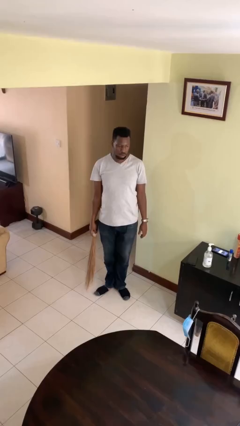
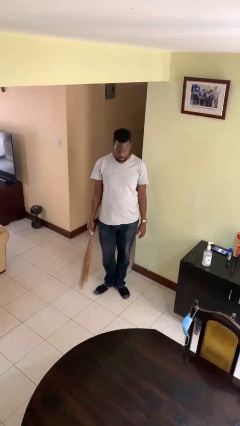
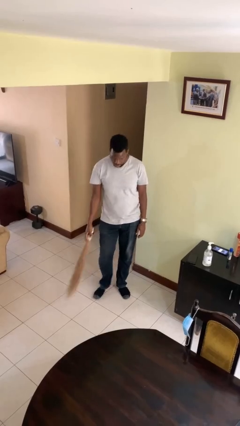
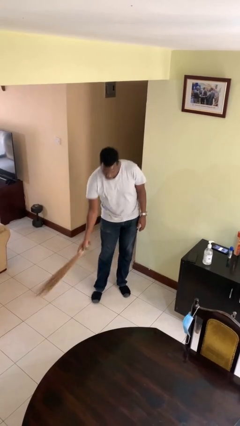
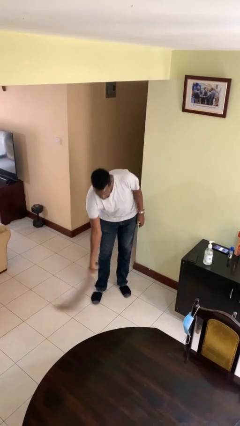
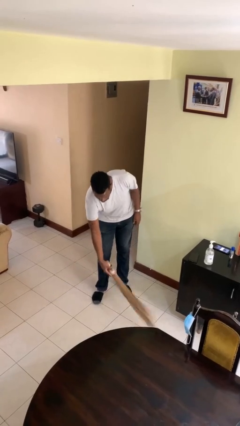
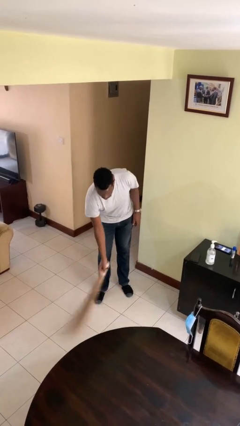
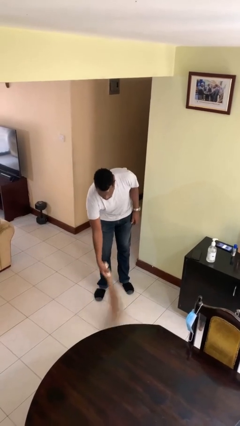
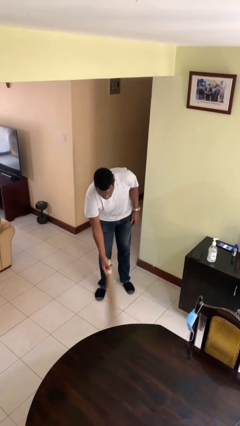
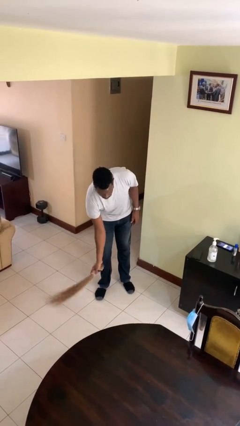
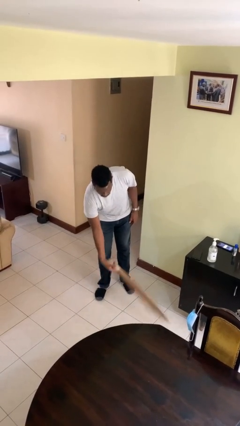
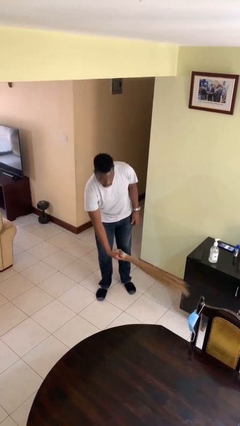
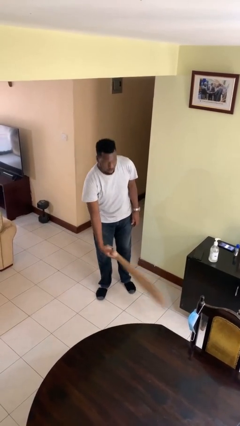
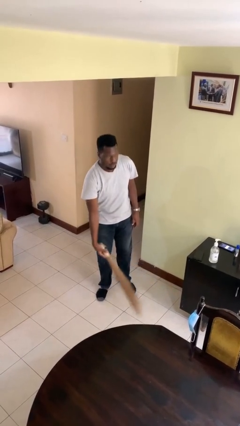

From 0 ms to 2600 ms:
person sweeps floor

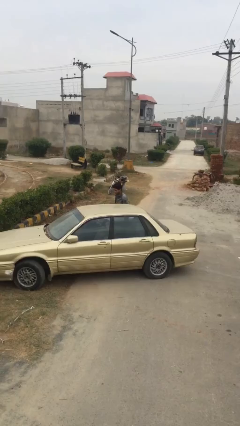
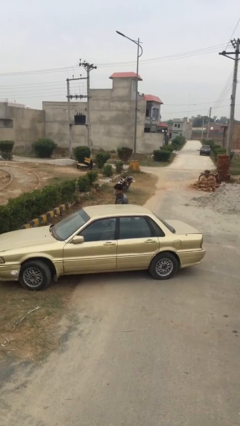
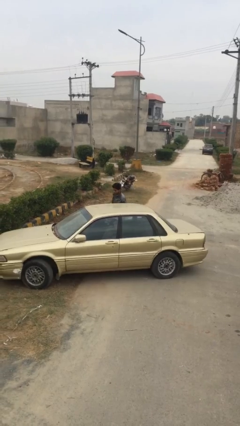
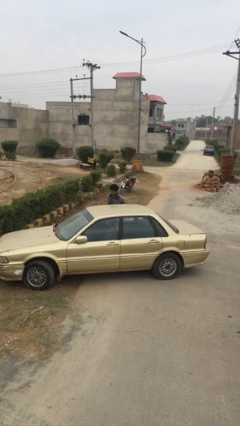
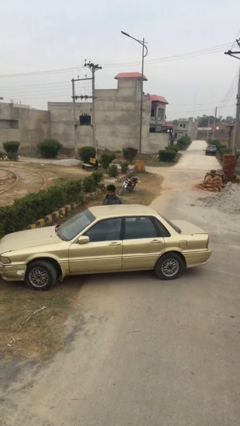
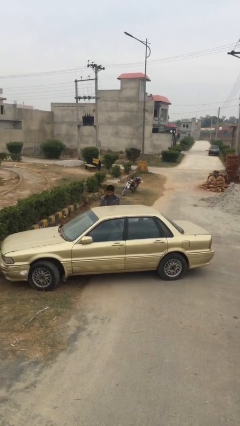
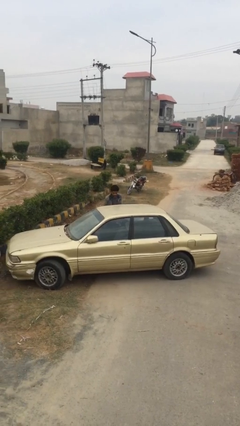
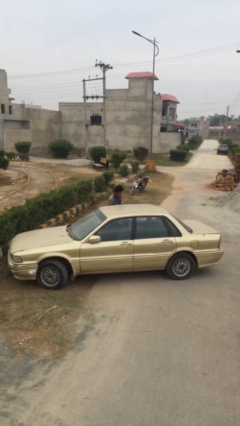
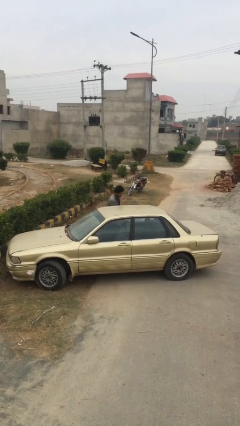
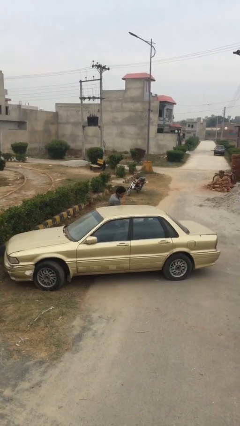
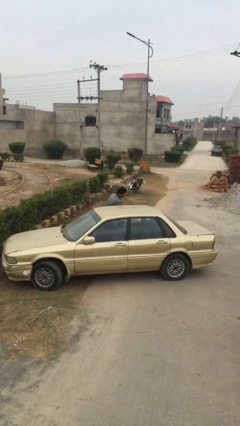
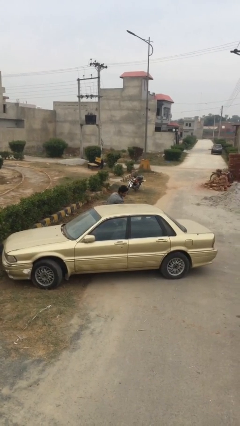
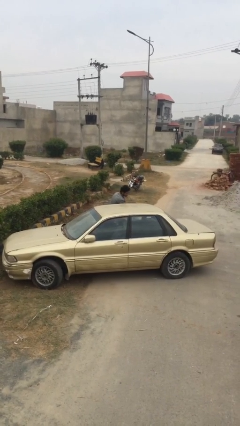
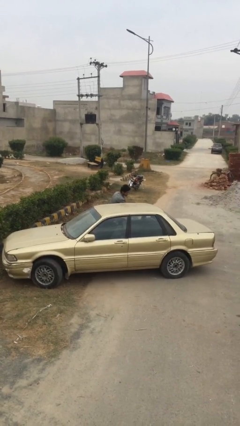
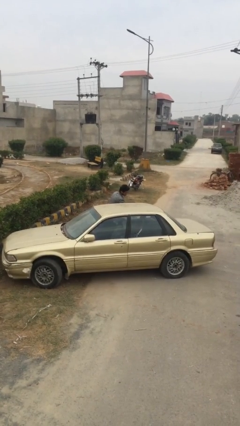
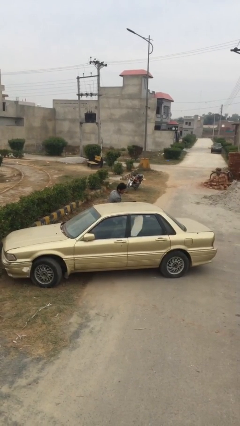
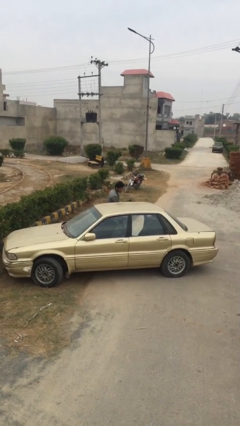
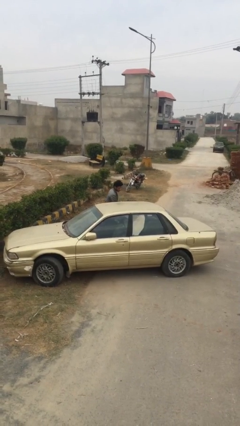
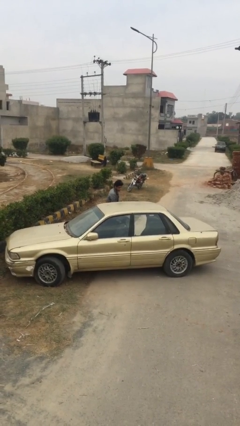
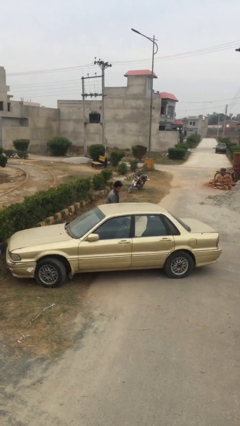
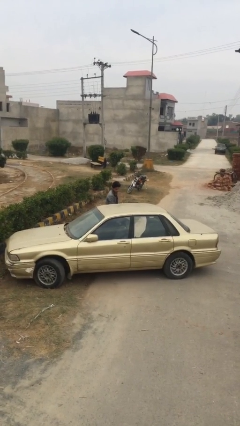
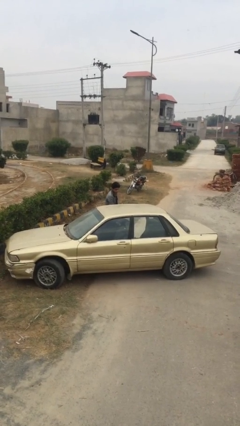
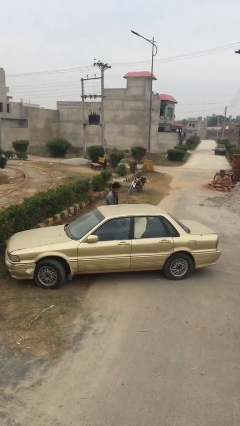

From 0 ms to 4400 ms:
person opens car door

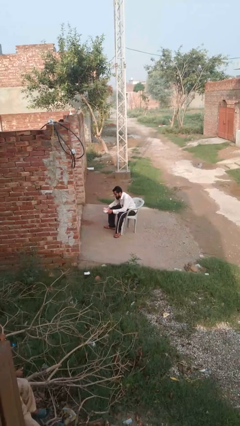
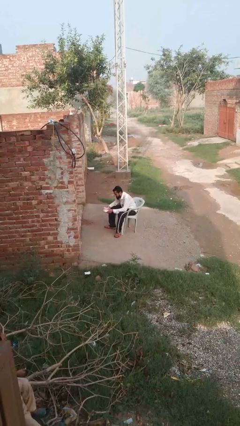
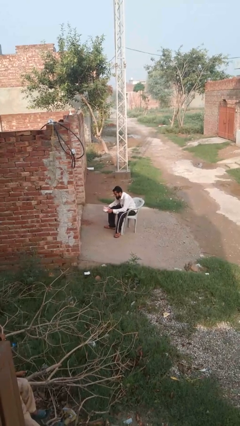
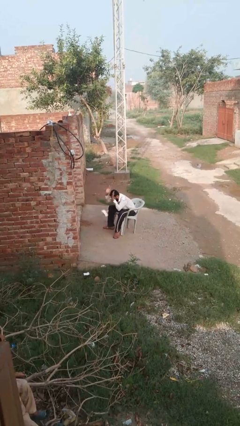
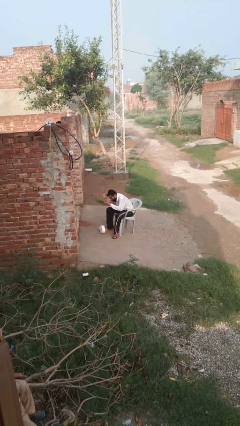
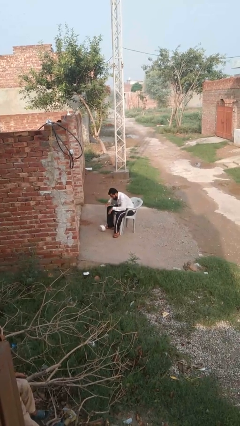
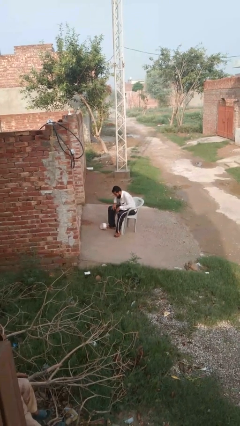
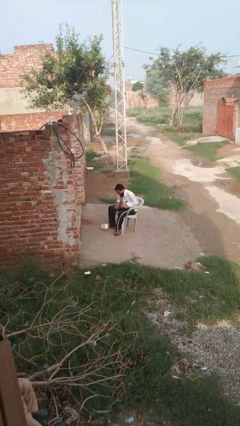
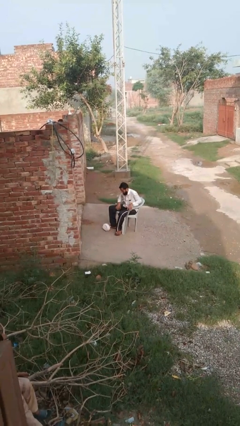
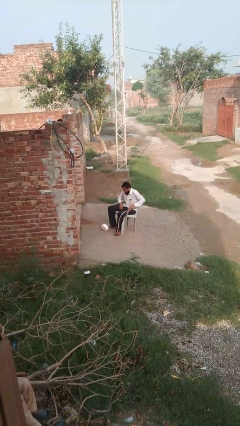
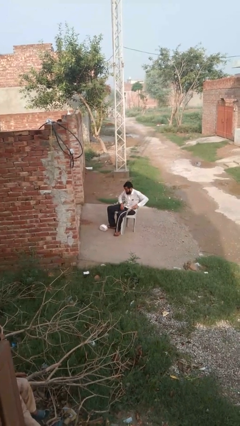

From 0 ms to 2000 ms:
person drops object

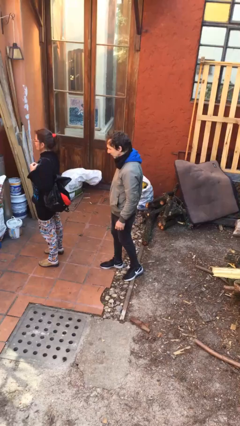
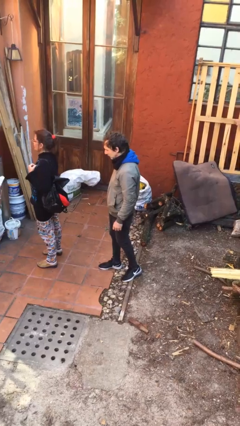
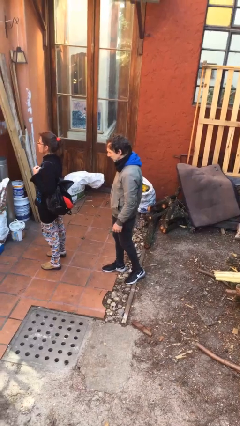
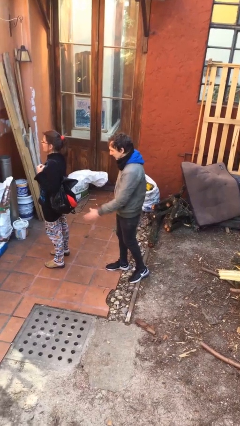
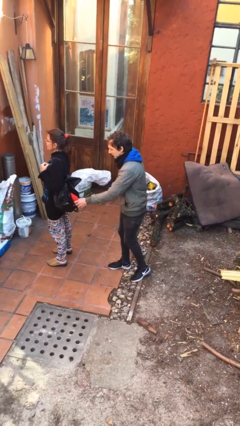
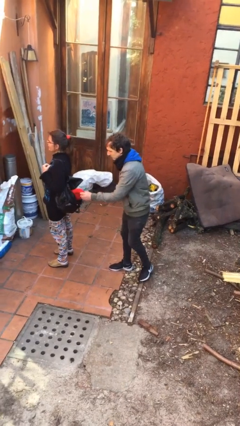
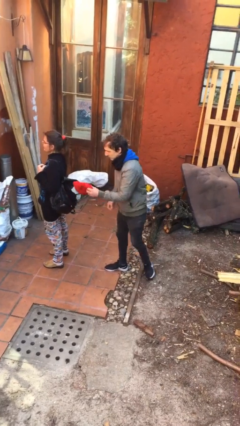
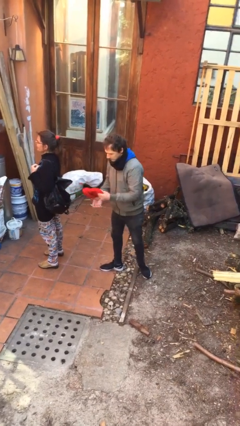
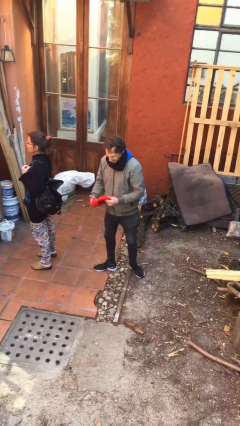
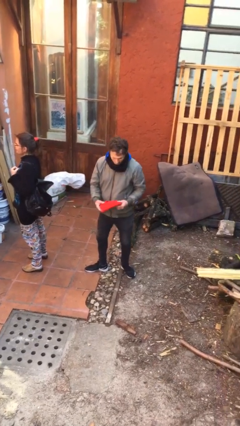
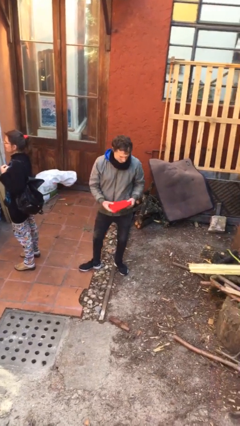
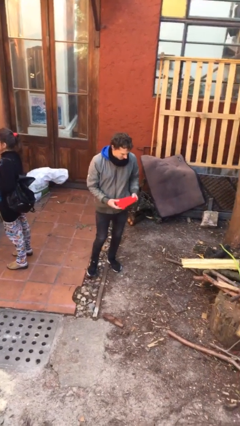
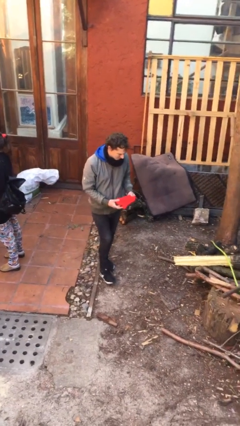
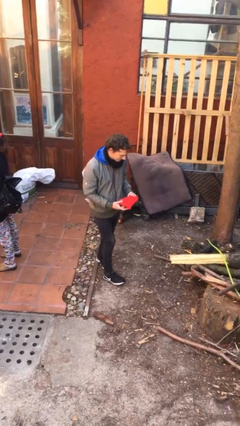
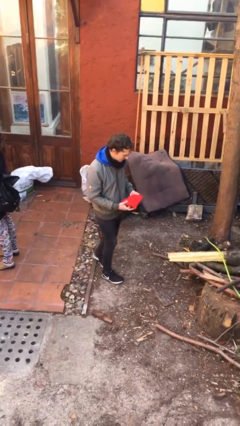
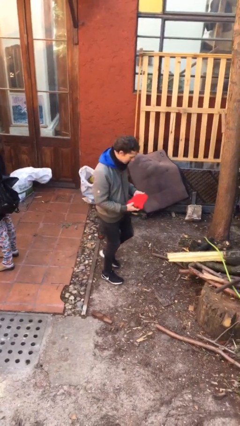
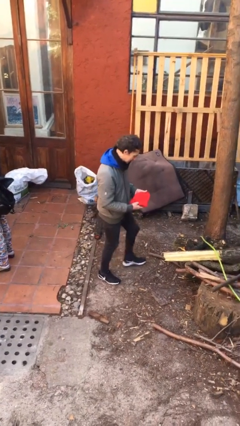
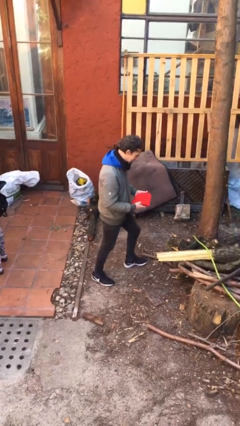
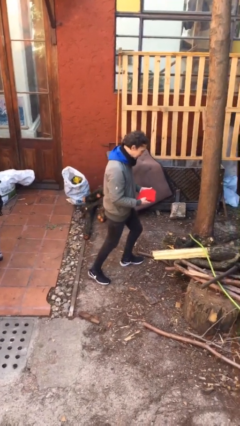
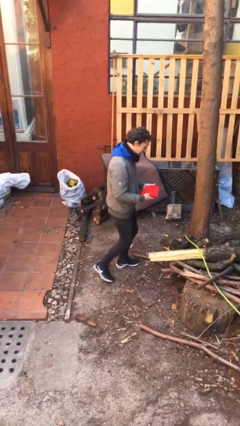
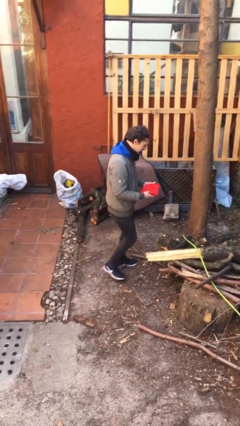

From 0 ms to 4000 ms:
person steals object from person

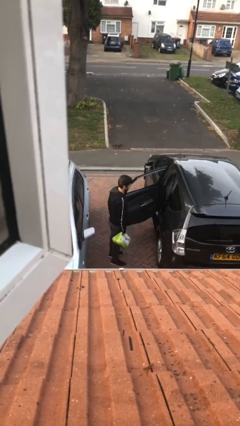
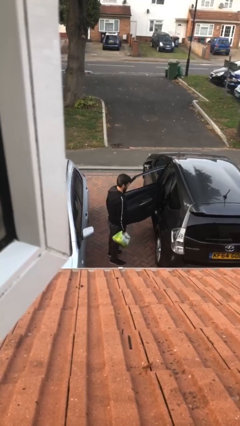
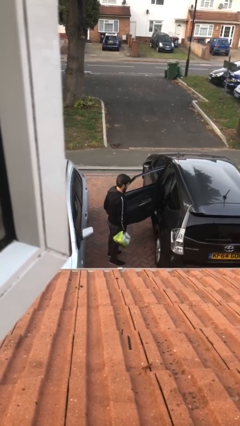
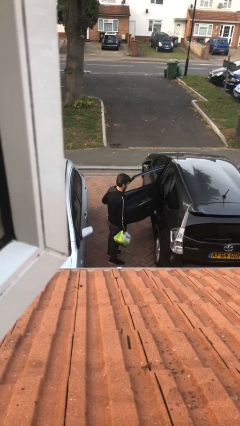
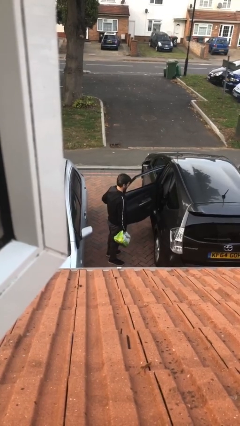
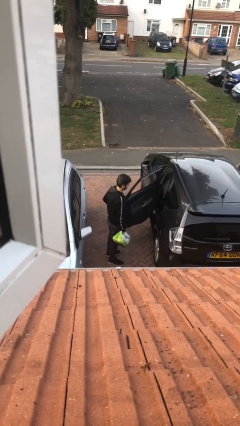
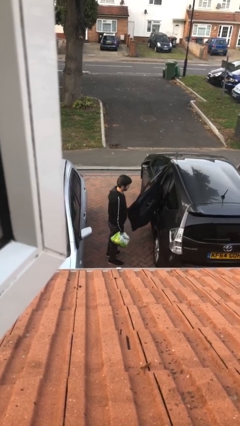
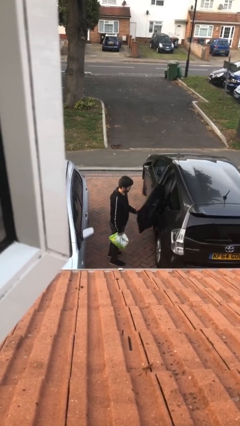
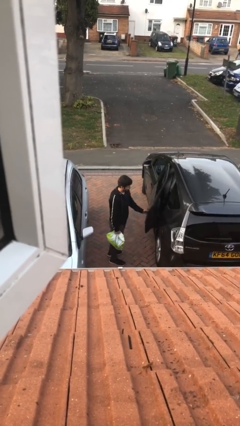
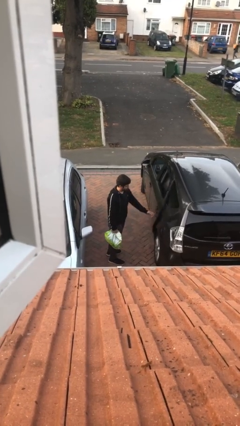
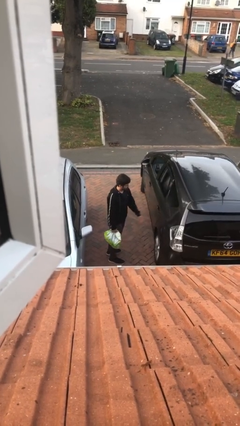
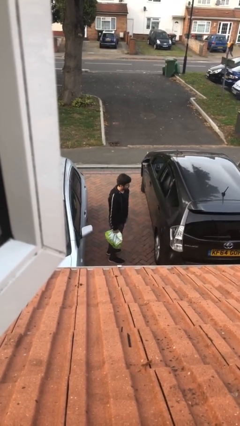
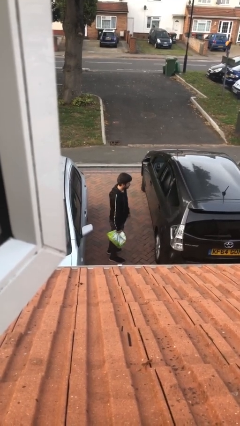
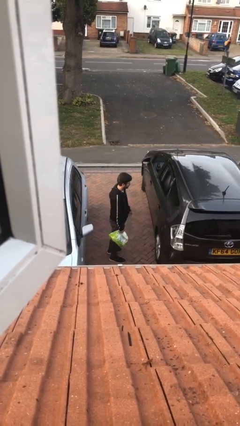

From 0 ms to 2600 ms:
person closes car door

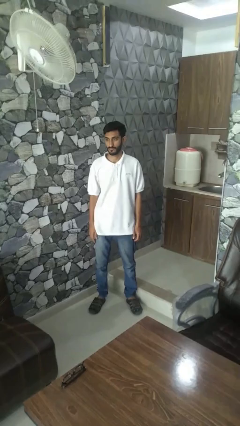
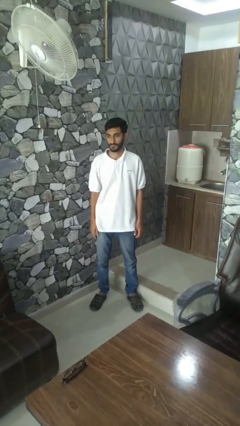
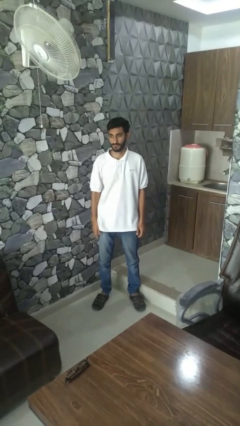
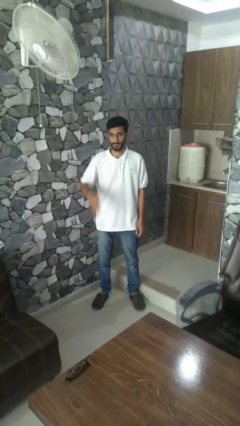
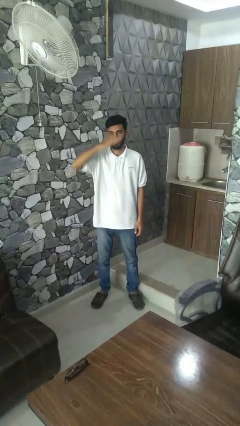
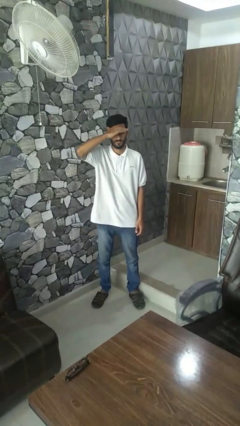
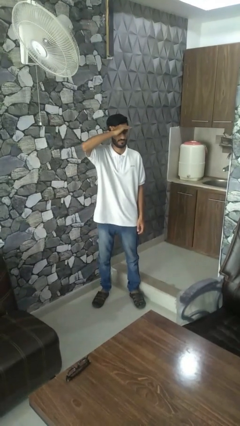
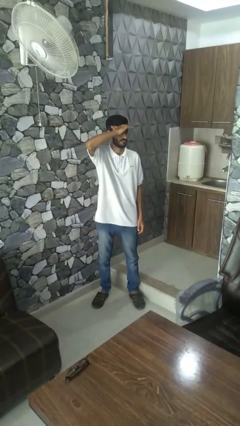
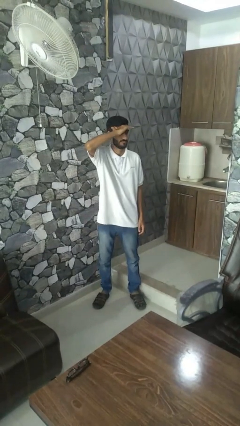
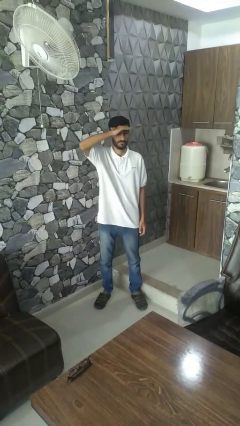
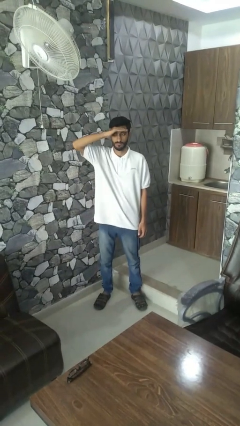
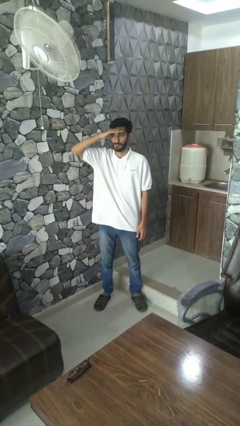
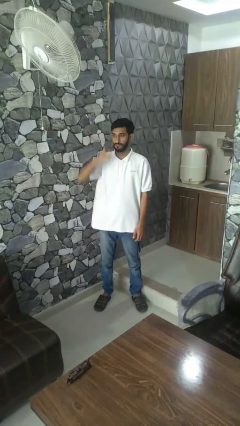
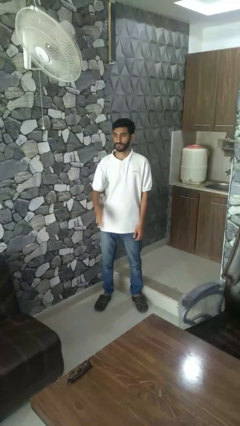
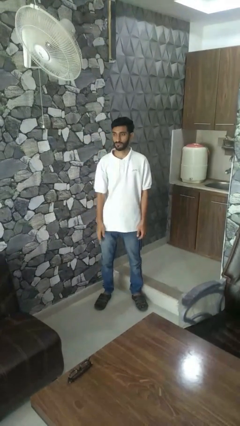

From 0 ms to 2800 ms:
person shades eyes
